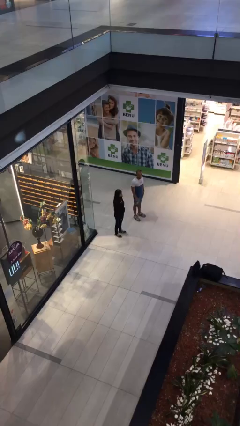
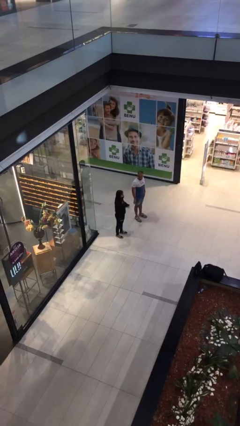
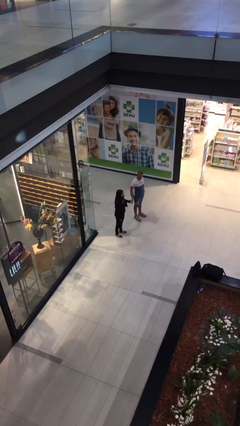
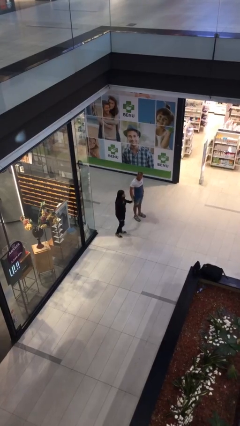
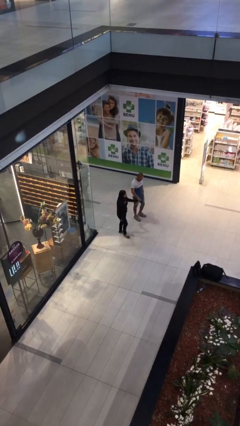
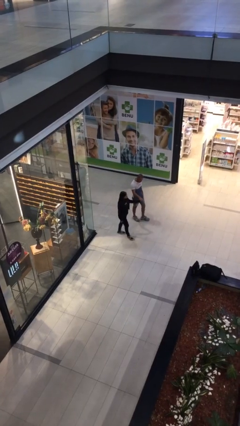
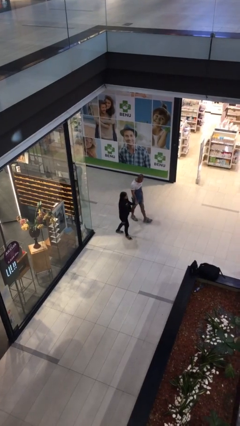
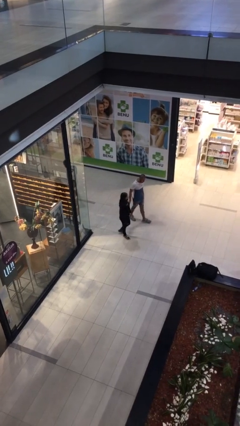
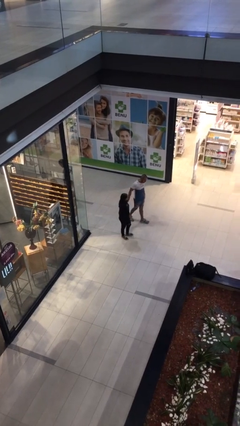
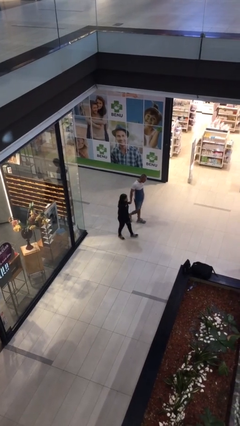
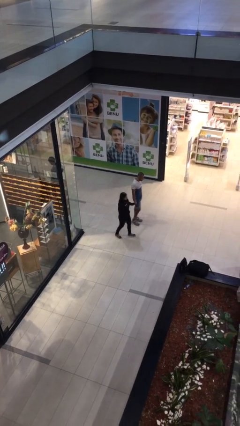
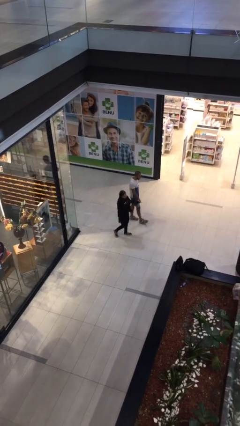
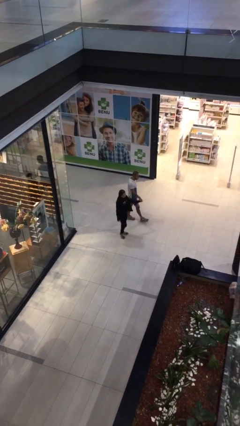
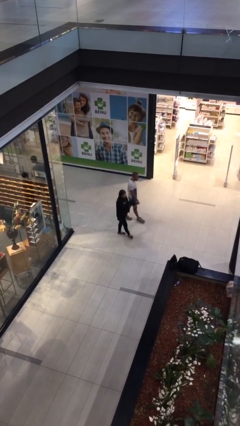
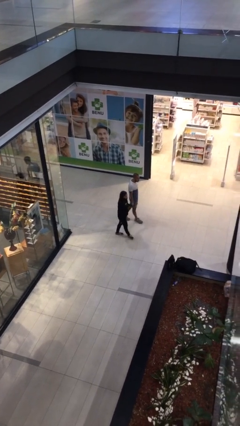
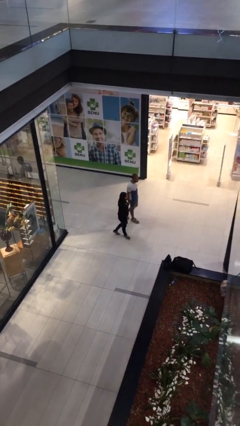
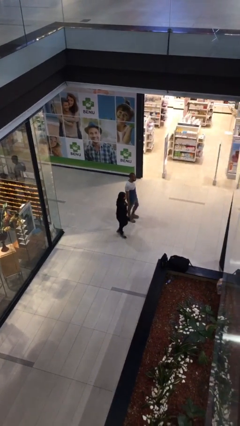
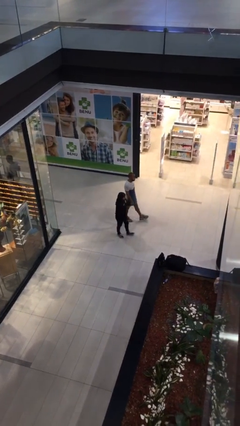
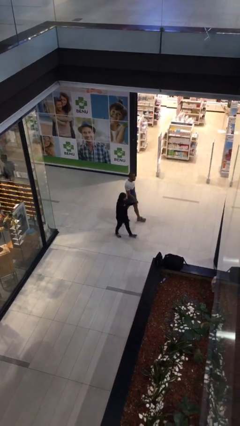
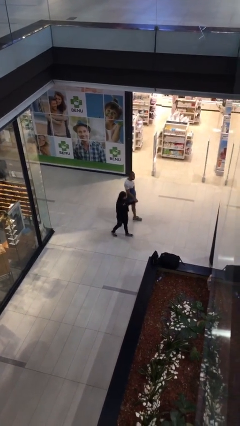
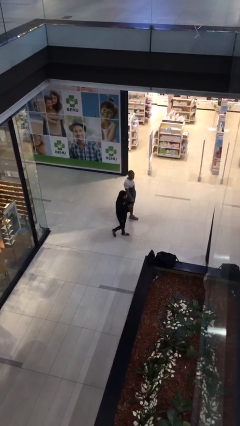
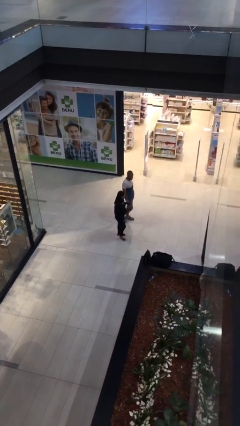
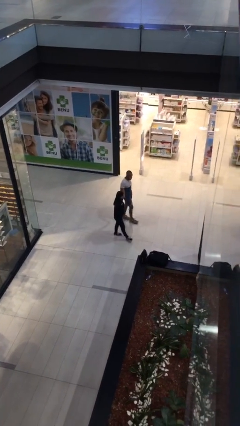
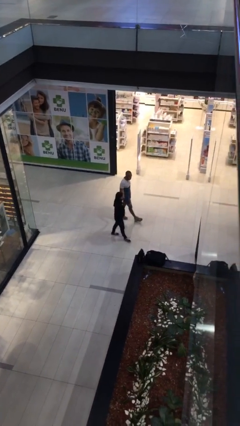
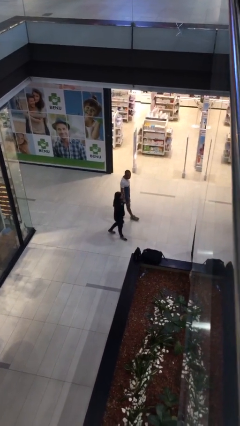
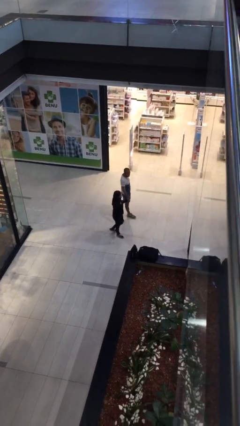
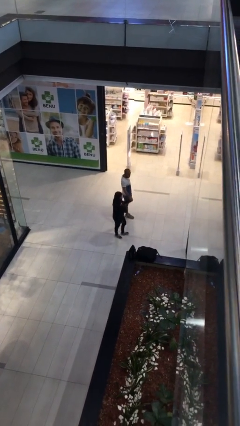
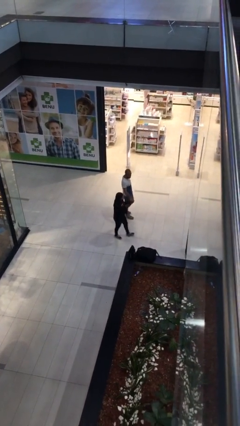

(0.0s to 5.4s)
person holds hand

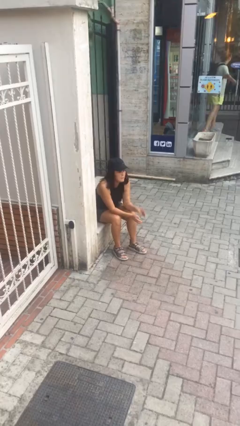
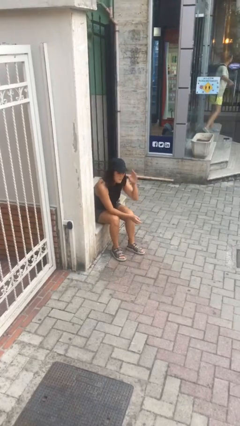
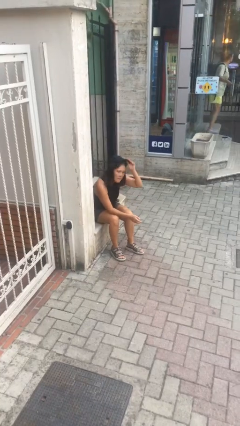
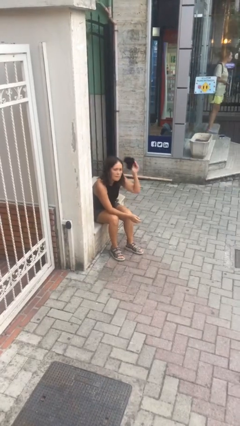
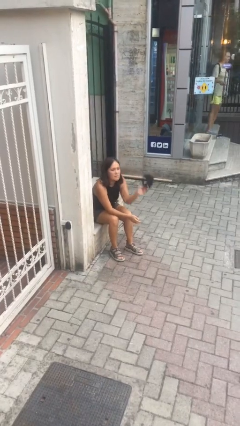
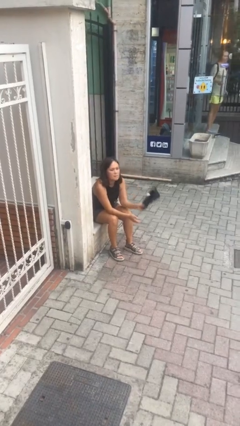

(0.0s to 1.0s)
person takes off hat

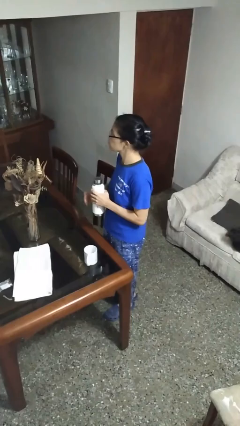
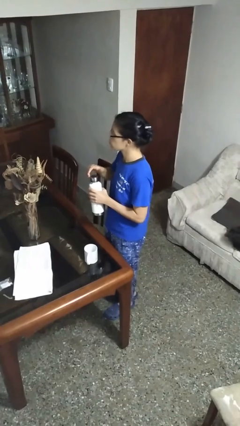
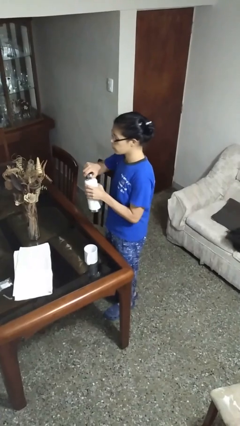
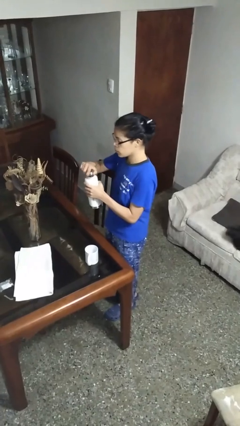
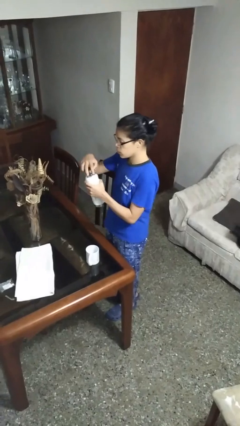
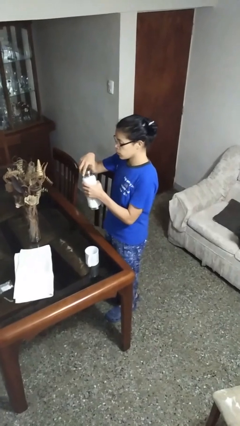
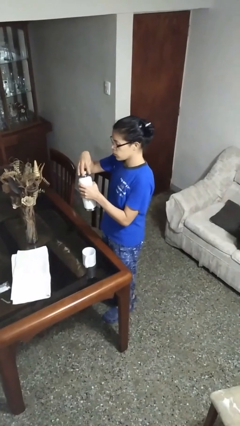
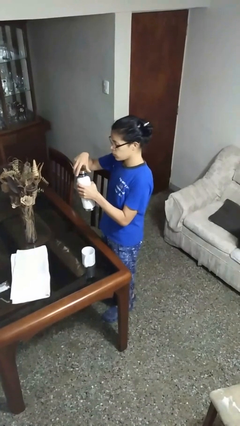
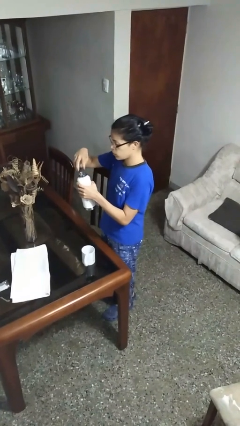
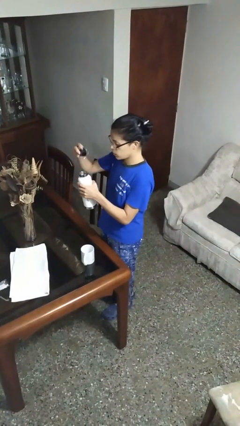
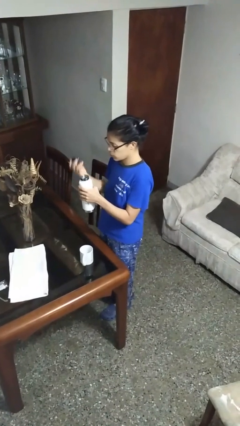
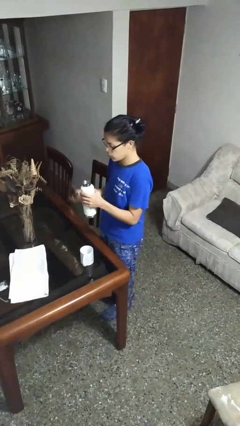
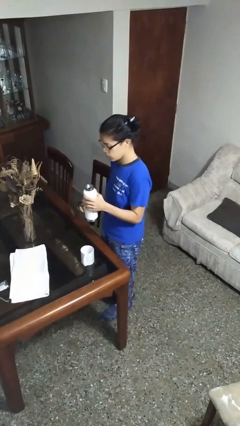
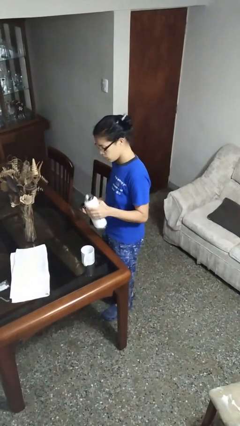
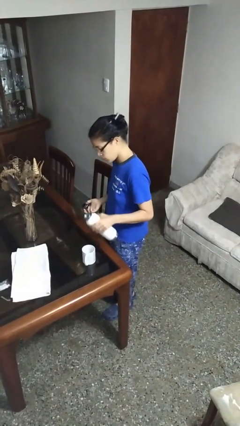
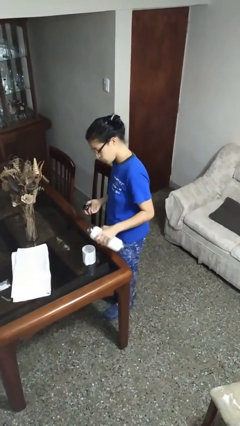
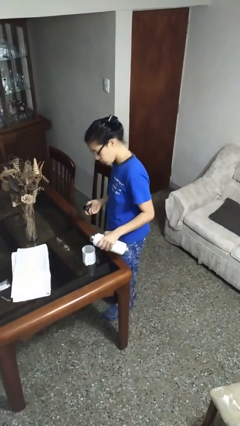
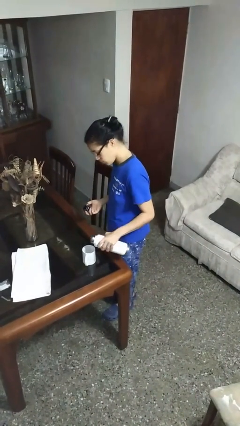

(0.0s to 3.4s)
person unscrews lid from bottle

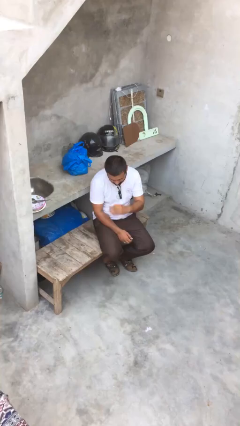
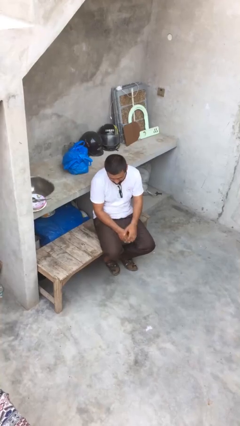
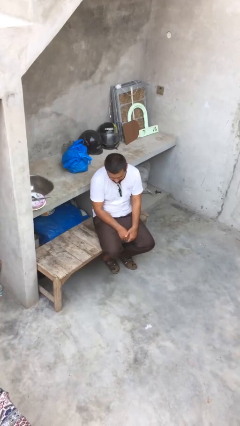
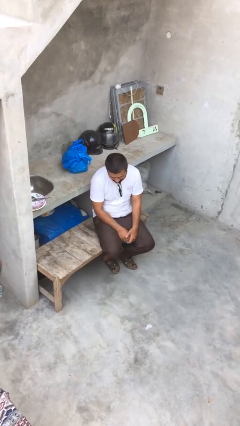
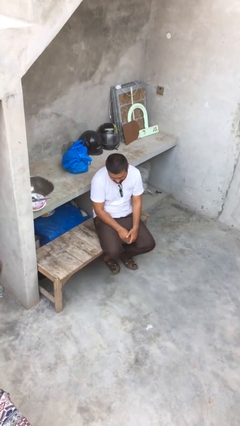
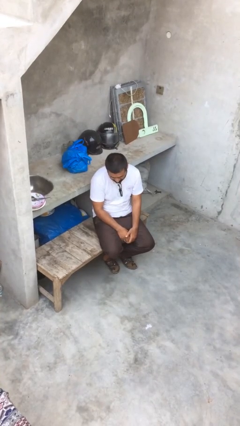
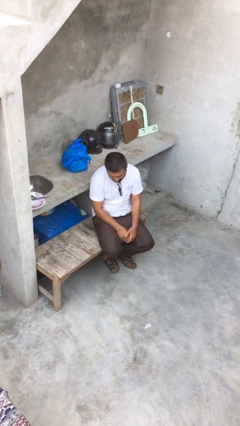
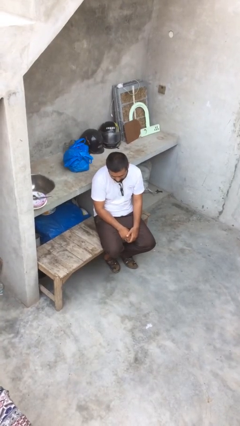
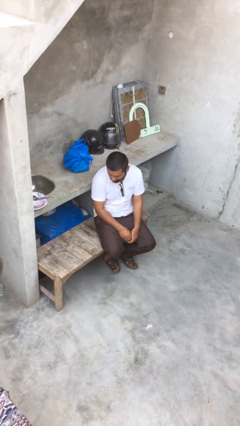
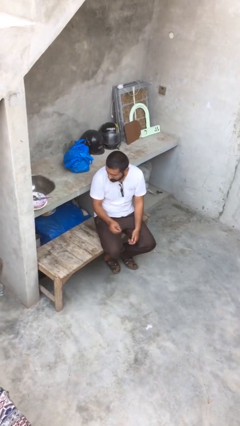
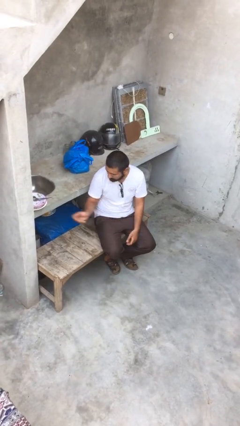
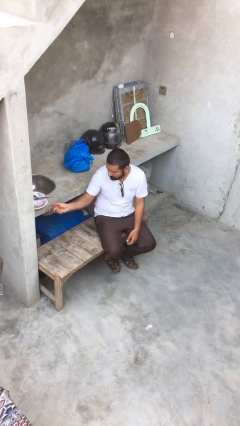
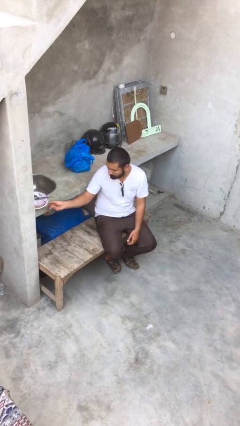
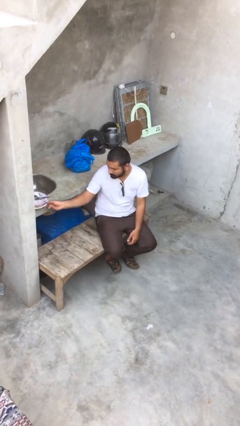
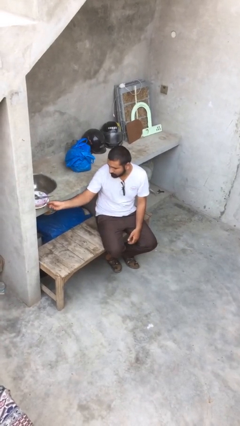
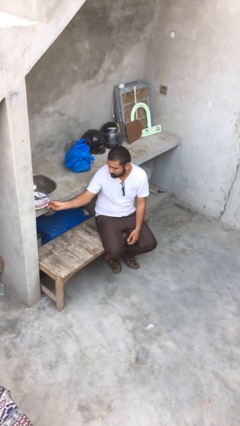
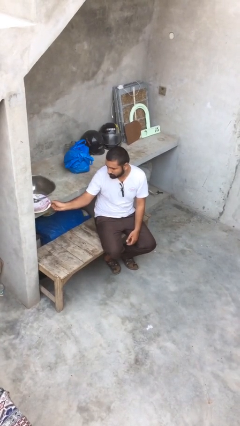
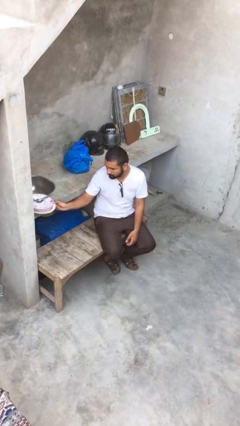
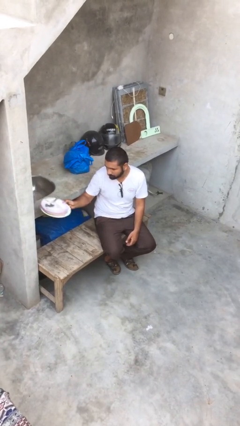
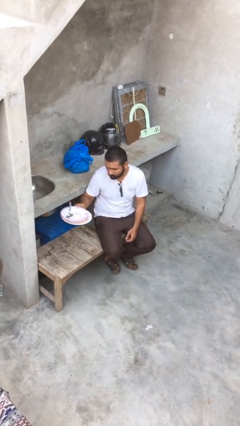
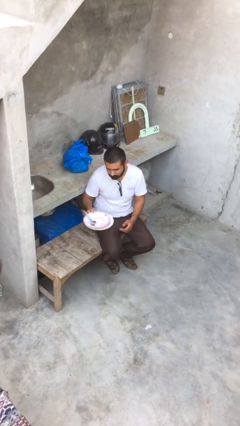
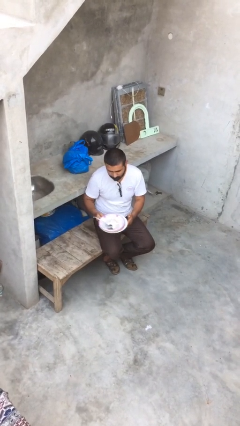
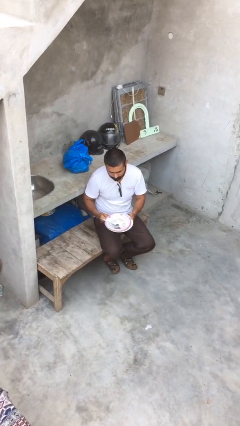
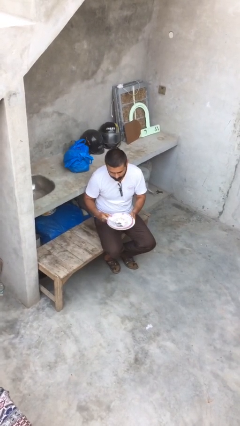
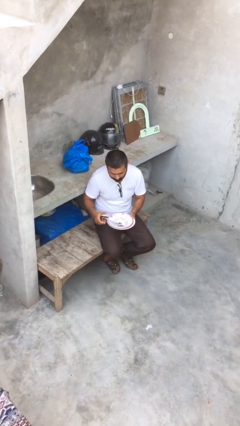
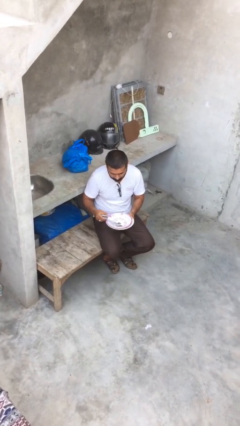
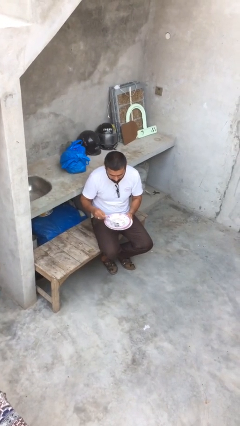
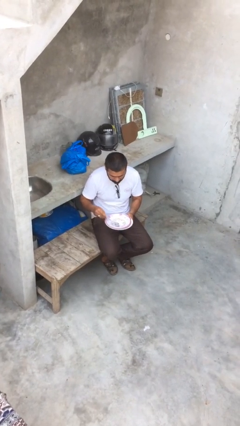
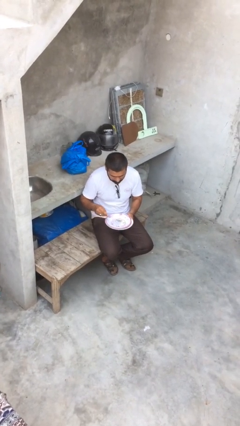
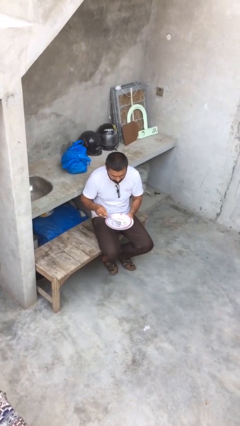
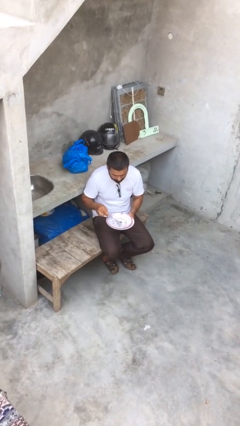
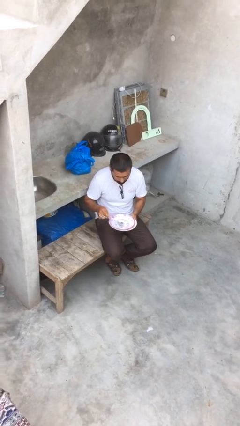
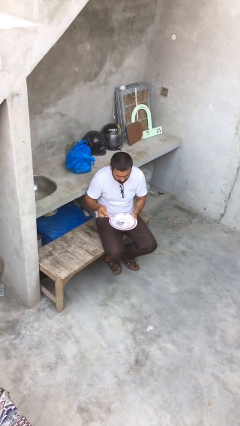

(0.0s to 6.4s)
person picks up object from shelf

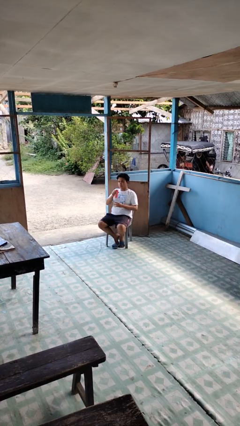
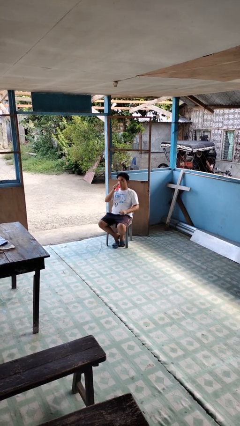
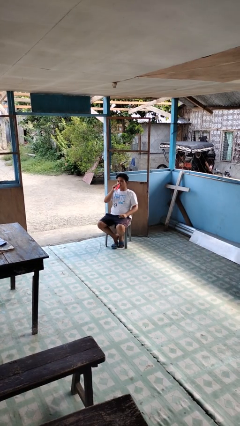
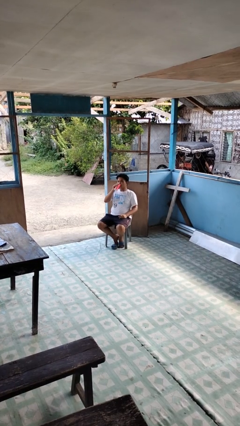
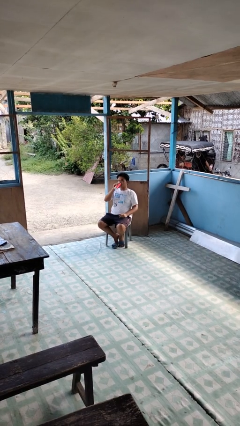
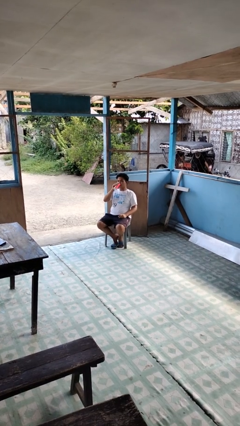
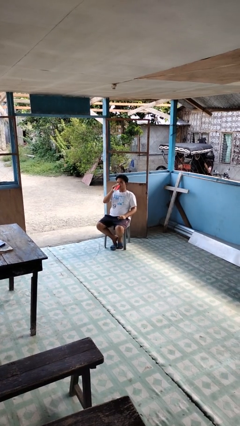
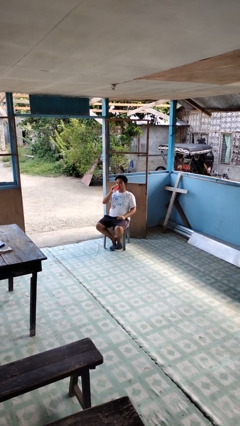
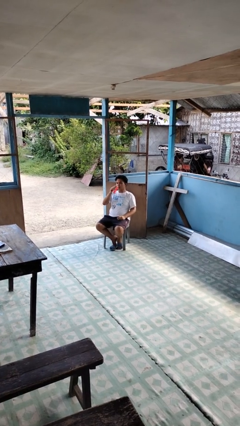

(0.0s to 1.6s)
person drinks from beverage can
